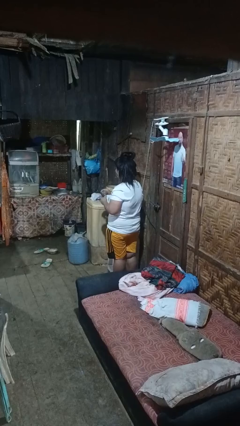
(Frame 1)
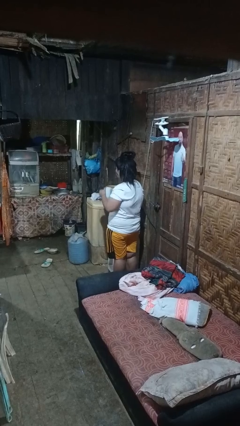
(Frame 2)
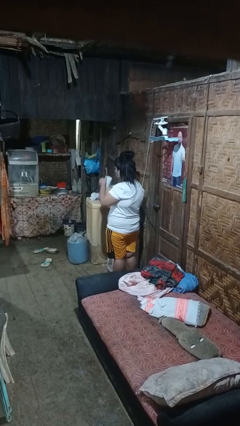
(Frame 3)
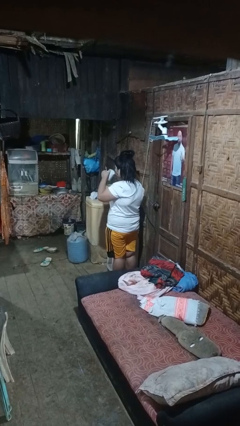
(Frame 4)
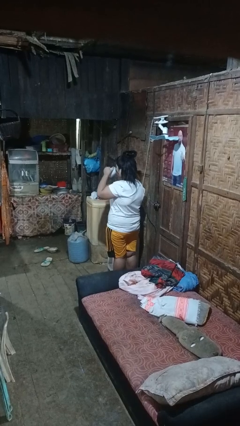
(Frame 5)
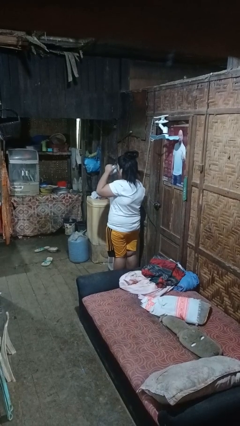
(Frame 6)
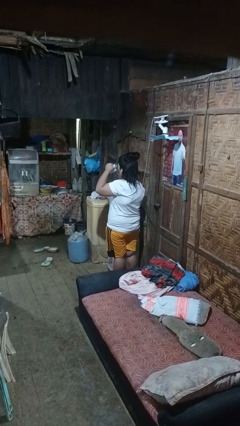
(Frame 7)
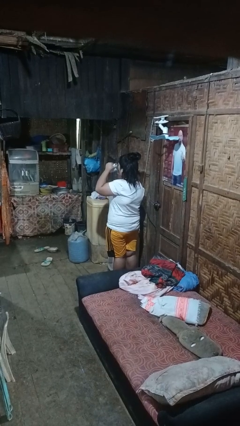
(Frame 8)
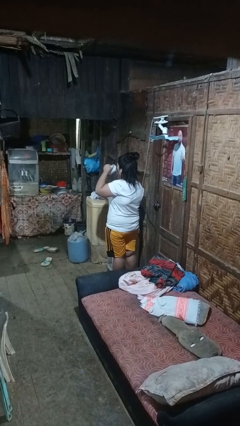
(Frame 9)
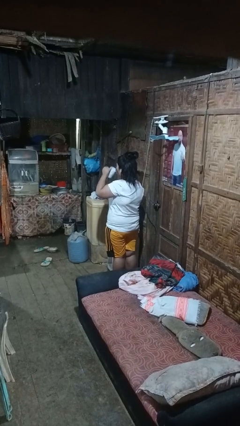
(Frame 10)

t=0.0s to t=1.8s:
person drinks from mug

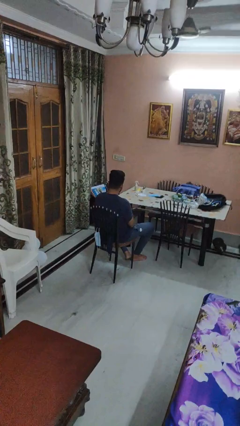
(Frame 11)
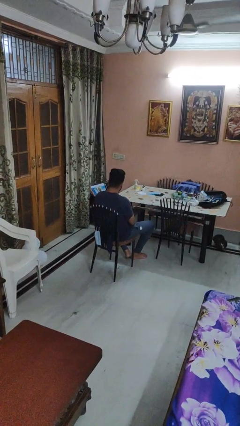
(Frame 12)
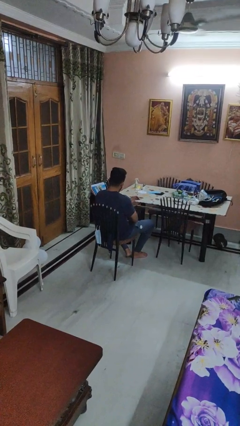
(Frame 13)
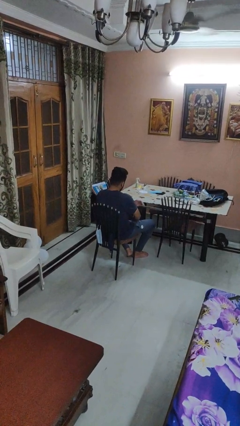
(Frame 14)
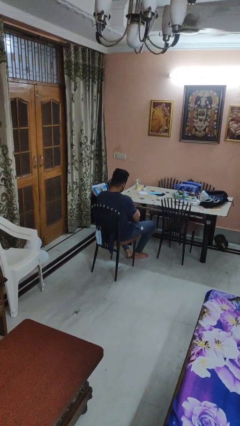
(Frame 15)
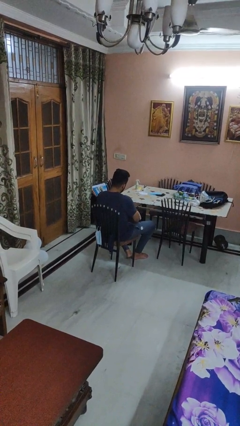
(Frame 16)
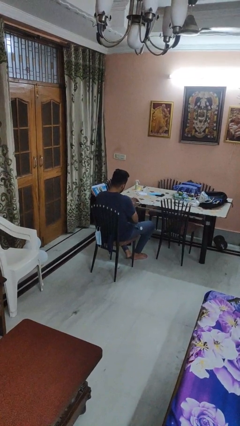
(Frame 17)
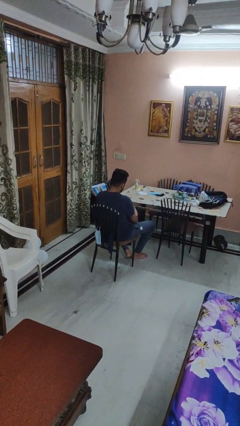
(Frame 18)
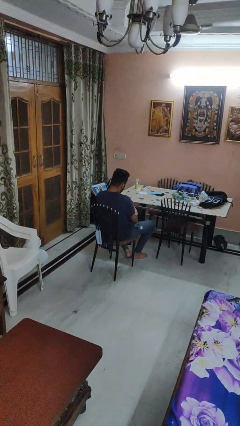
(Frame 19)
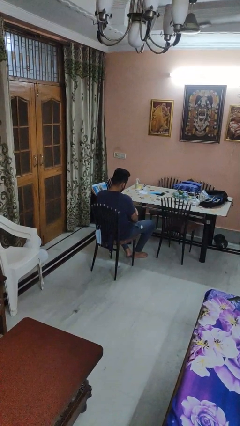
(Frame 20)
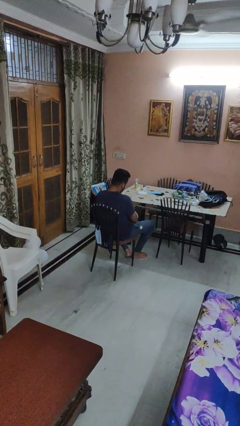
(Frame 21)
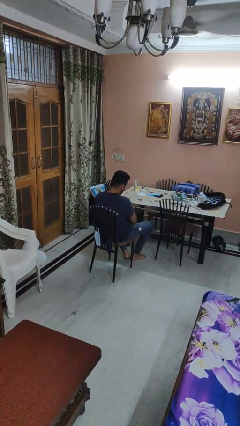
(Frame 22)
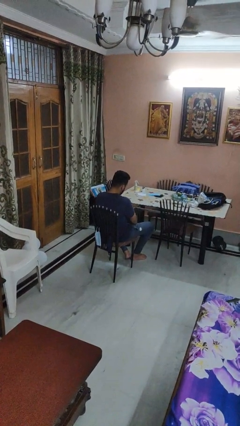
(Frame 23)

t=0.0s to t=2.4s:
person swats bug

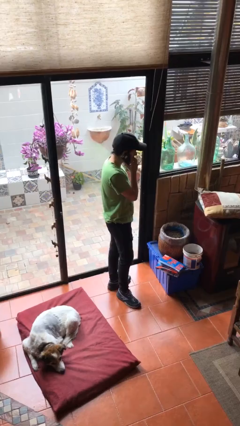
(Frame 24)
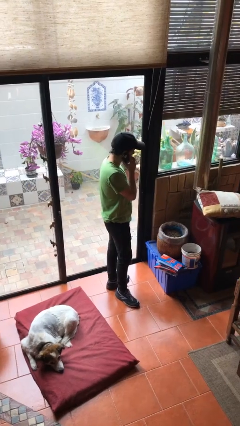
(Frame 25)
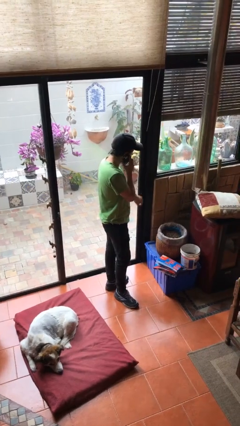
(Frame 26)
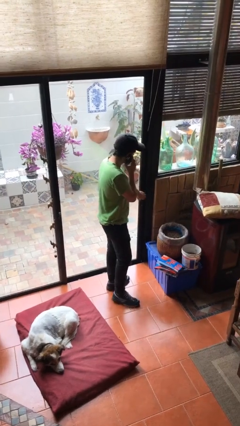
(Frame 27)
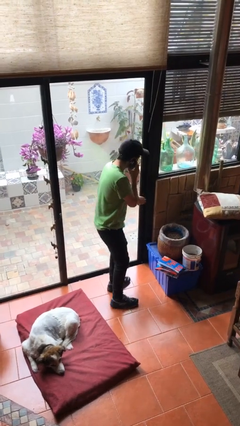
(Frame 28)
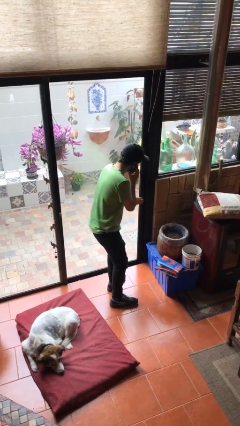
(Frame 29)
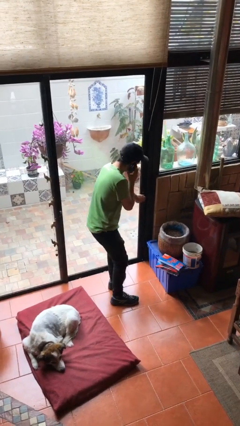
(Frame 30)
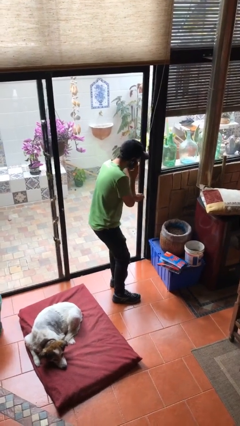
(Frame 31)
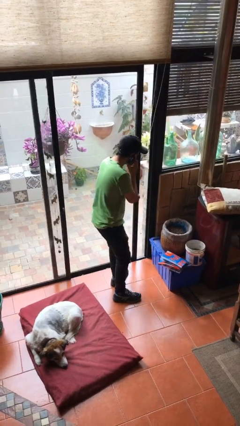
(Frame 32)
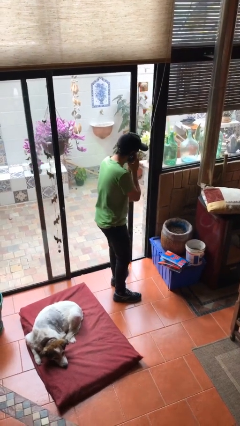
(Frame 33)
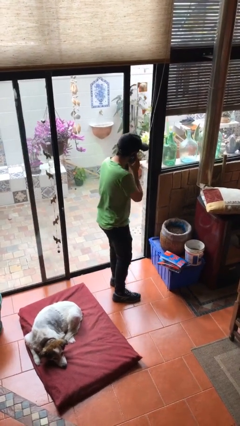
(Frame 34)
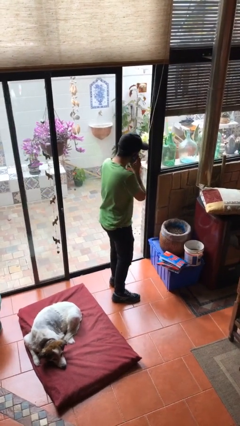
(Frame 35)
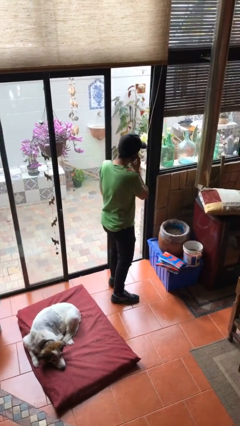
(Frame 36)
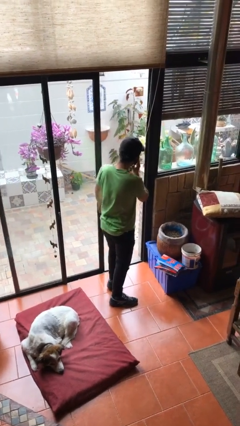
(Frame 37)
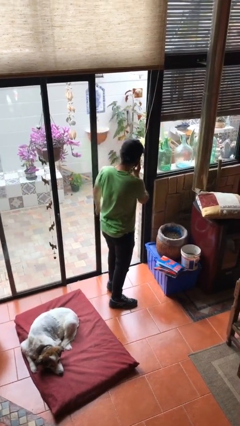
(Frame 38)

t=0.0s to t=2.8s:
person opens facility door

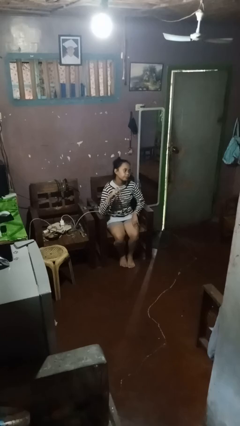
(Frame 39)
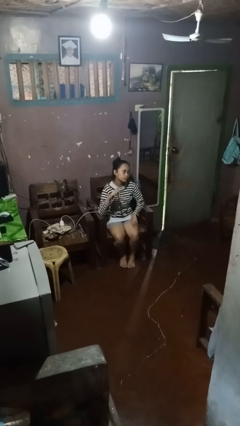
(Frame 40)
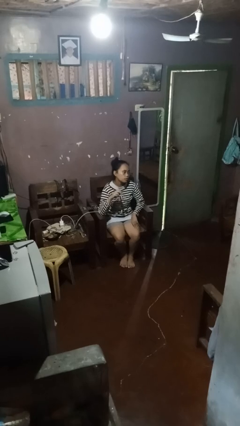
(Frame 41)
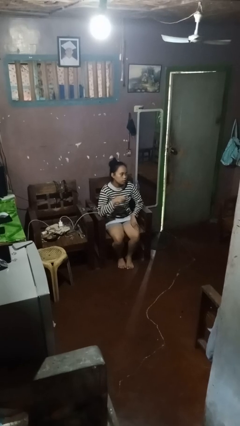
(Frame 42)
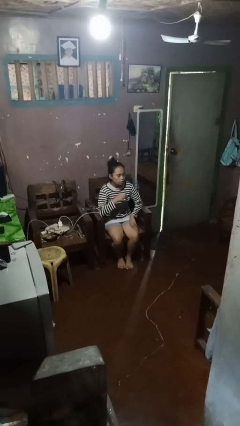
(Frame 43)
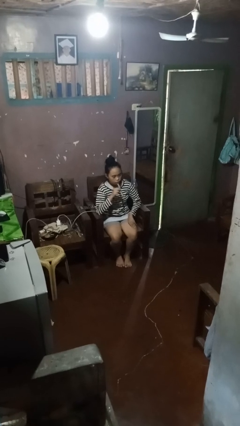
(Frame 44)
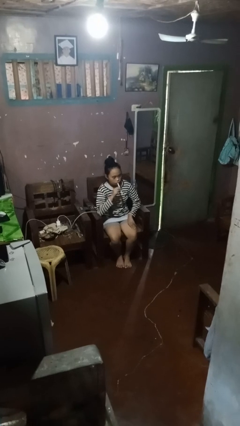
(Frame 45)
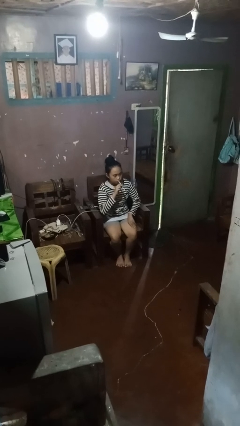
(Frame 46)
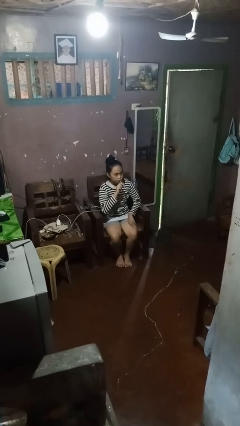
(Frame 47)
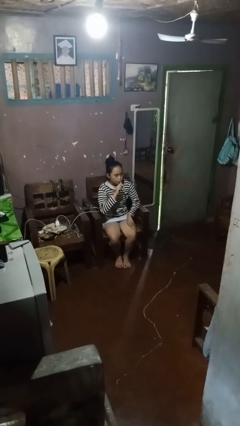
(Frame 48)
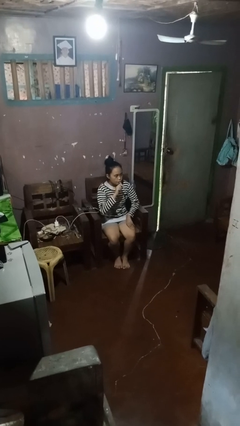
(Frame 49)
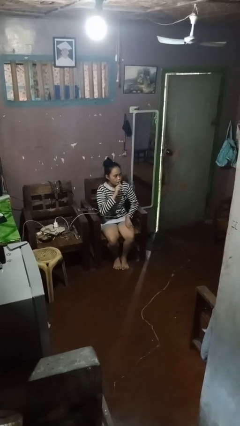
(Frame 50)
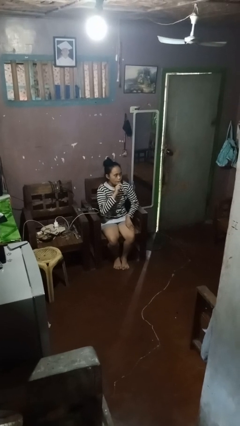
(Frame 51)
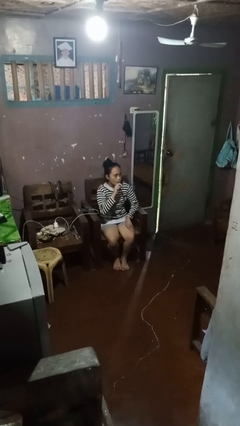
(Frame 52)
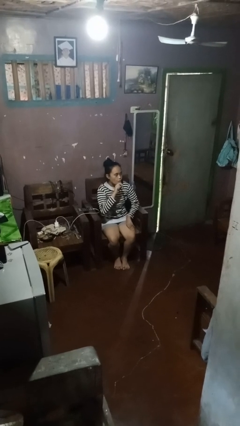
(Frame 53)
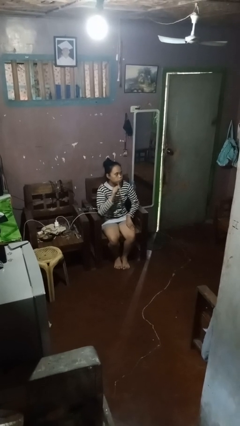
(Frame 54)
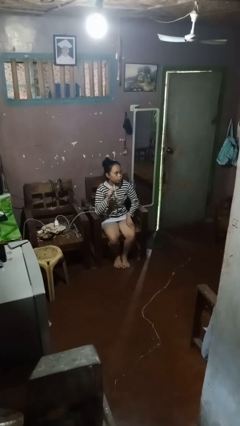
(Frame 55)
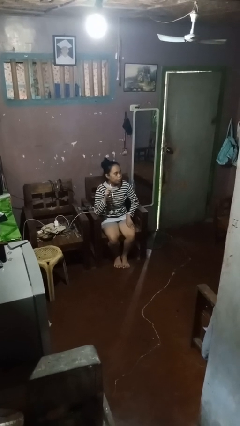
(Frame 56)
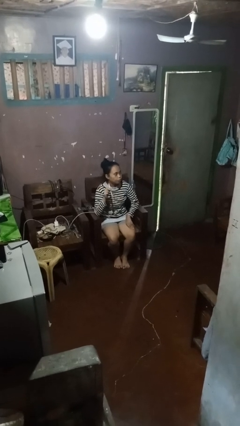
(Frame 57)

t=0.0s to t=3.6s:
person vapes

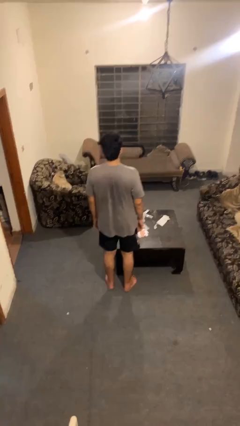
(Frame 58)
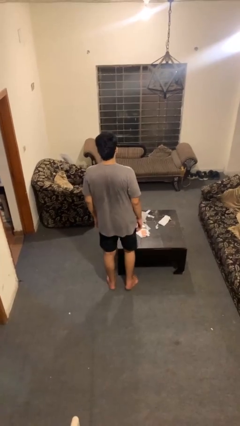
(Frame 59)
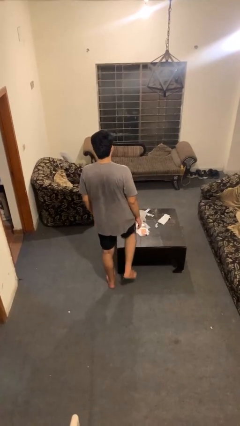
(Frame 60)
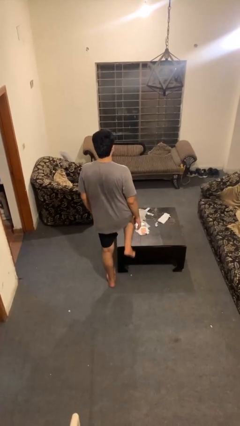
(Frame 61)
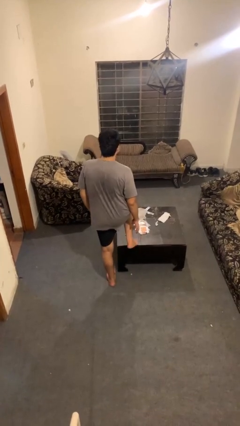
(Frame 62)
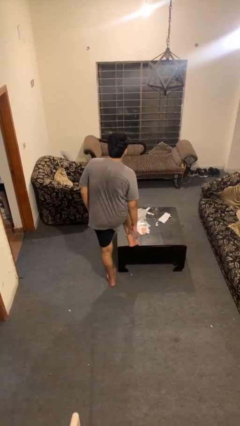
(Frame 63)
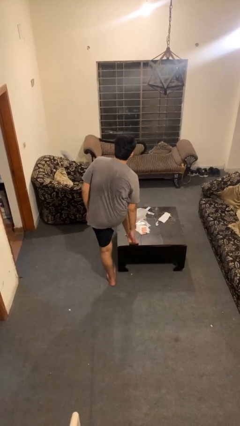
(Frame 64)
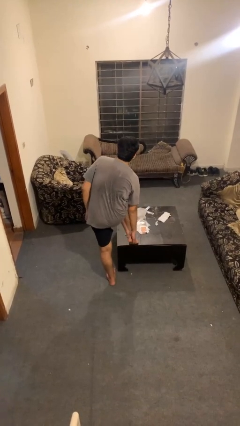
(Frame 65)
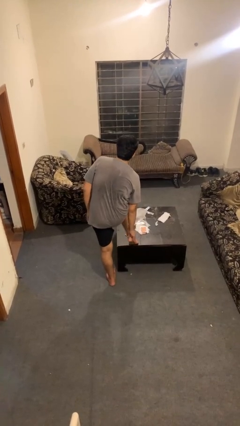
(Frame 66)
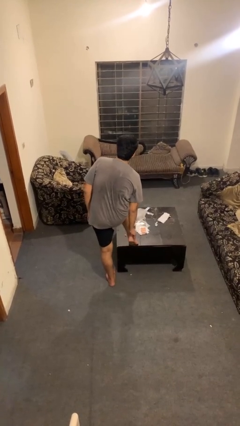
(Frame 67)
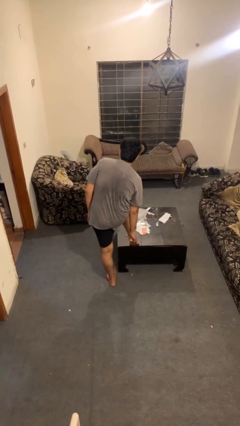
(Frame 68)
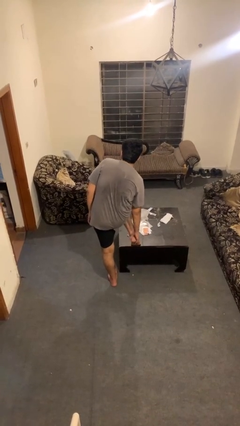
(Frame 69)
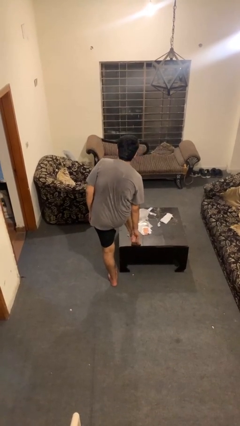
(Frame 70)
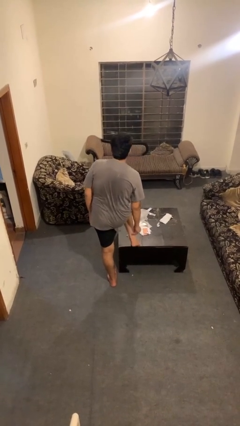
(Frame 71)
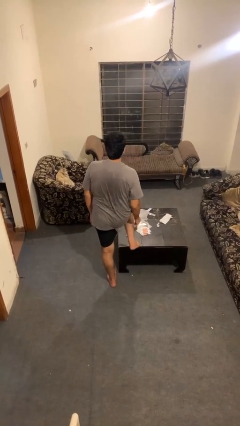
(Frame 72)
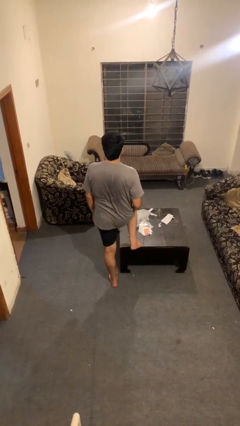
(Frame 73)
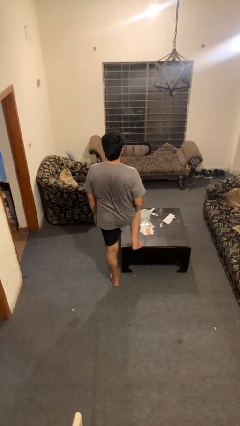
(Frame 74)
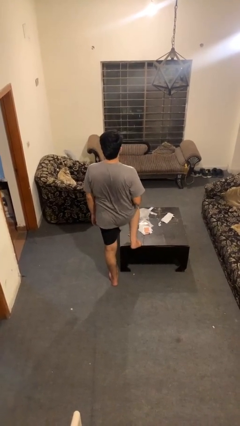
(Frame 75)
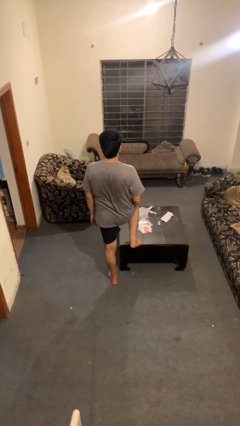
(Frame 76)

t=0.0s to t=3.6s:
person rubs foot

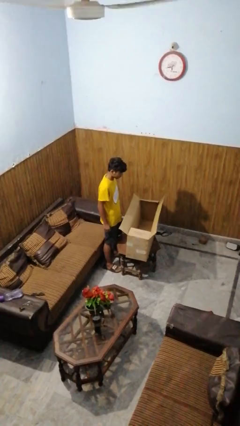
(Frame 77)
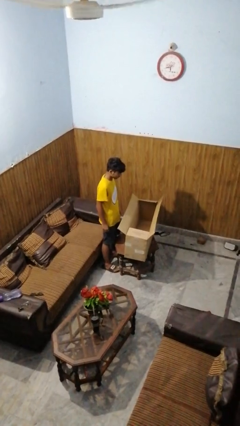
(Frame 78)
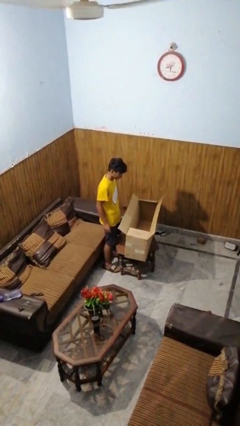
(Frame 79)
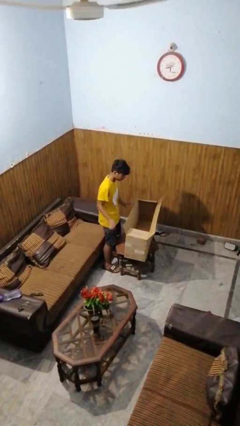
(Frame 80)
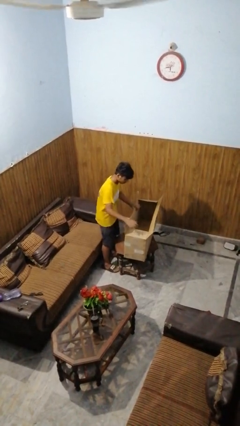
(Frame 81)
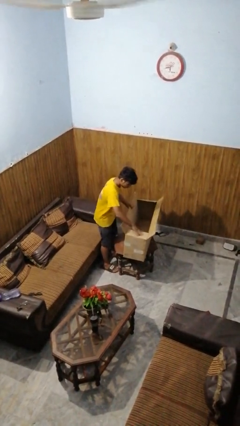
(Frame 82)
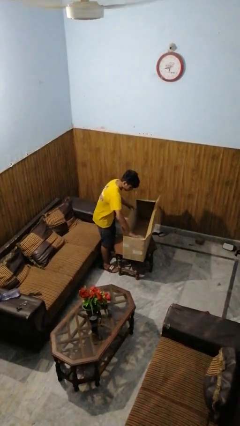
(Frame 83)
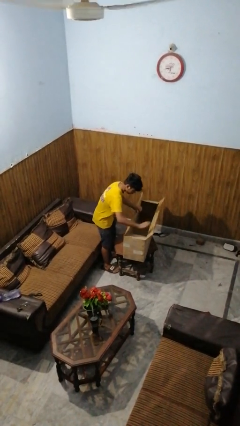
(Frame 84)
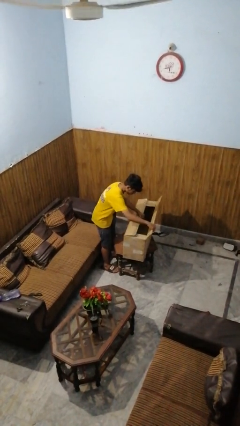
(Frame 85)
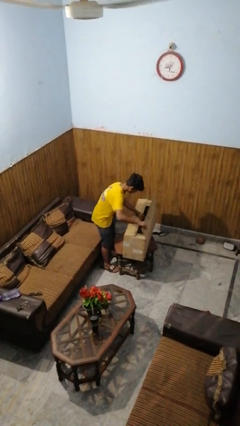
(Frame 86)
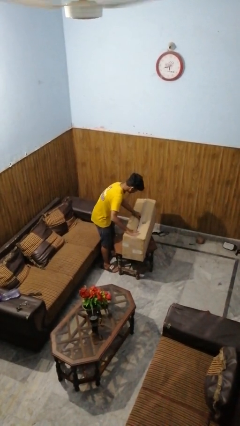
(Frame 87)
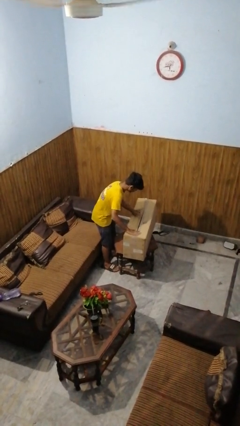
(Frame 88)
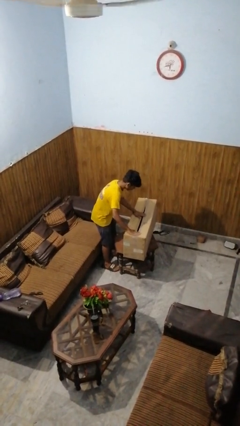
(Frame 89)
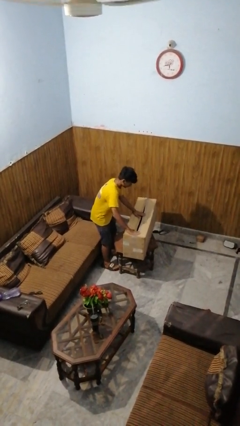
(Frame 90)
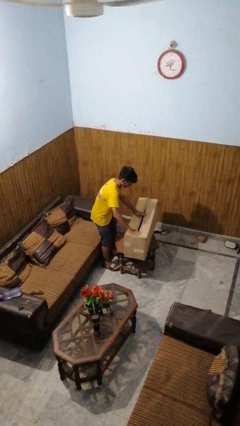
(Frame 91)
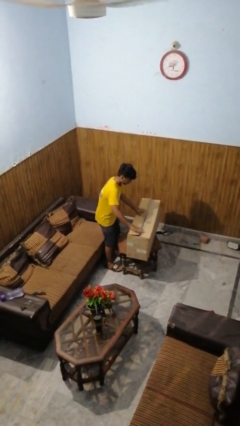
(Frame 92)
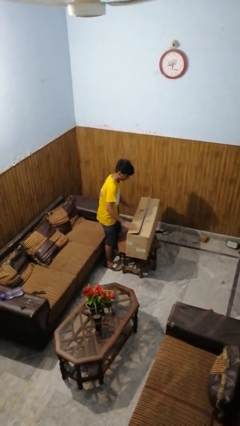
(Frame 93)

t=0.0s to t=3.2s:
person closes box

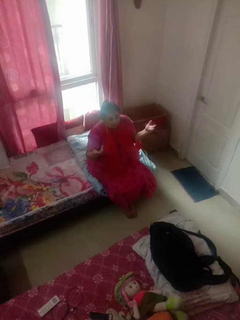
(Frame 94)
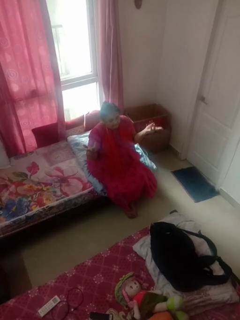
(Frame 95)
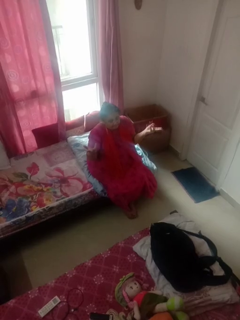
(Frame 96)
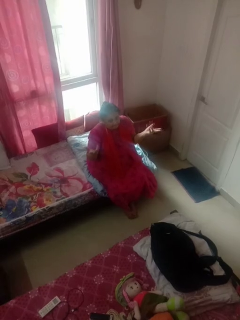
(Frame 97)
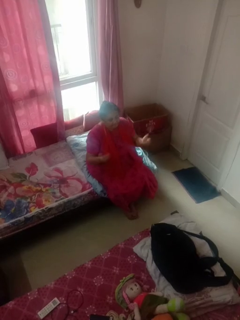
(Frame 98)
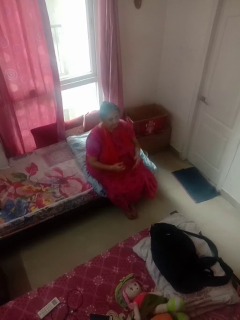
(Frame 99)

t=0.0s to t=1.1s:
person shrugs
